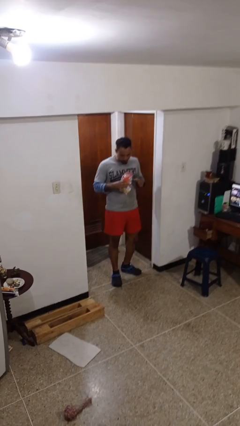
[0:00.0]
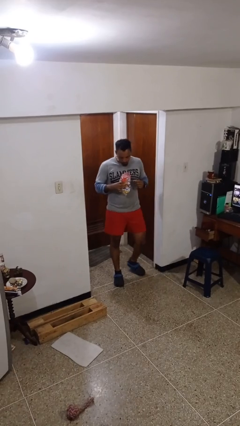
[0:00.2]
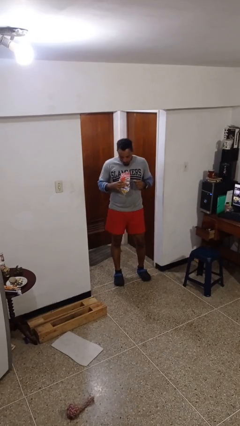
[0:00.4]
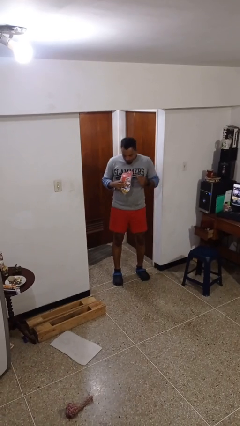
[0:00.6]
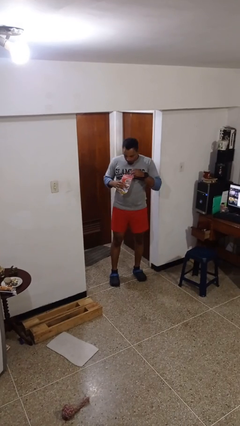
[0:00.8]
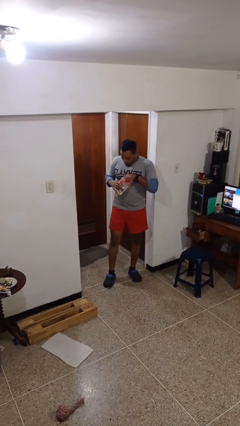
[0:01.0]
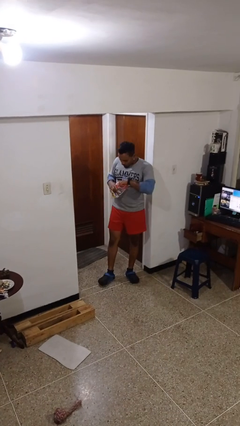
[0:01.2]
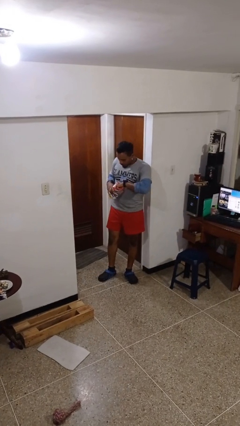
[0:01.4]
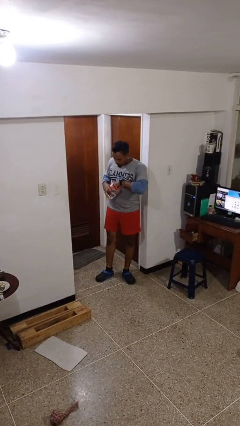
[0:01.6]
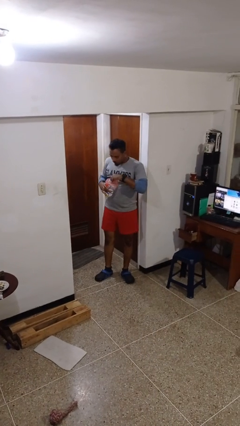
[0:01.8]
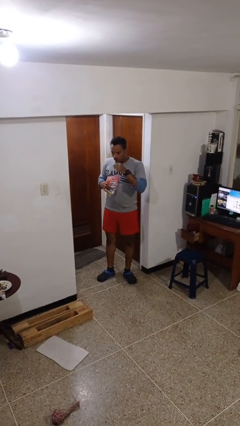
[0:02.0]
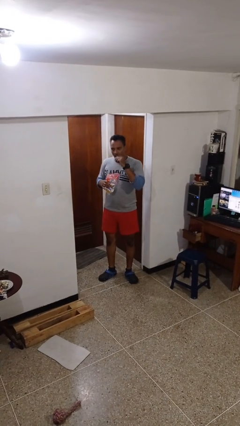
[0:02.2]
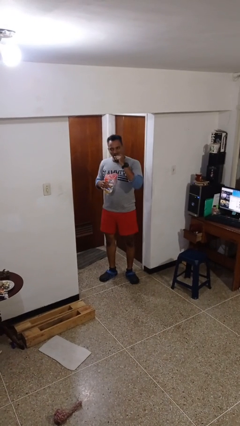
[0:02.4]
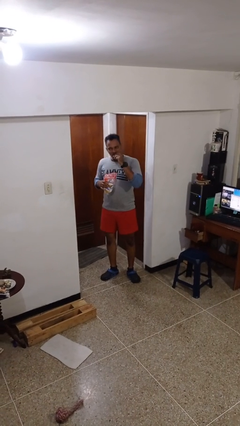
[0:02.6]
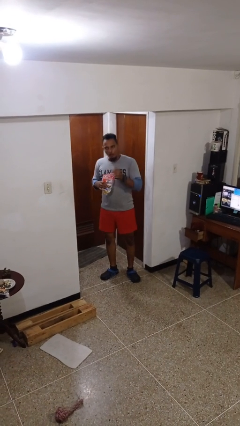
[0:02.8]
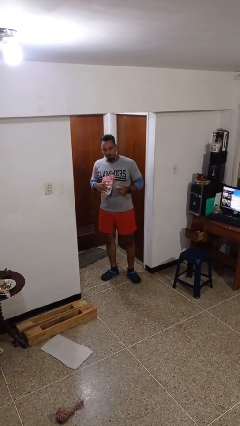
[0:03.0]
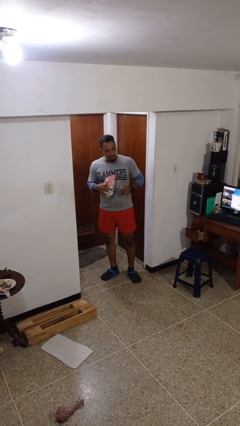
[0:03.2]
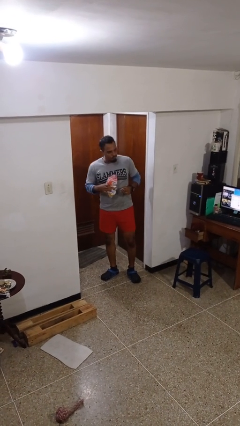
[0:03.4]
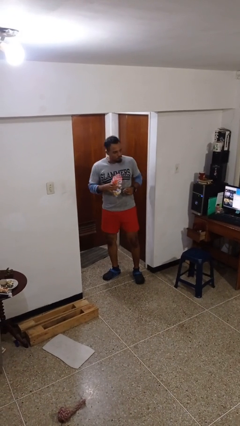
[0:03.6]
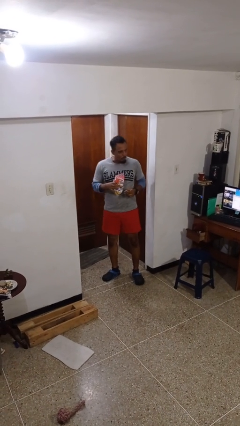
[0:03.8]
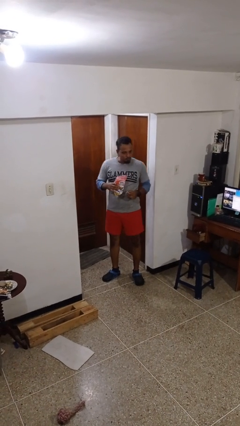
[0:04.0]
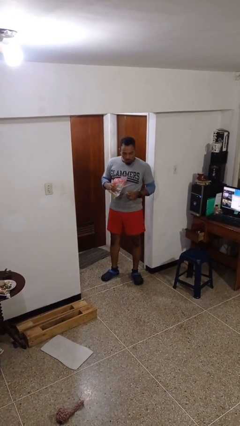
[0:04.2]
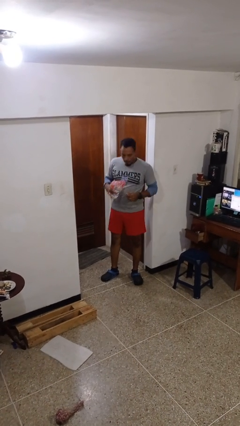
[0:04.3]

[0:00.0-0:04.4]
person eats snack from bag

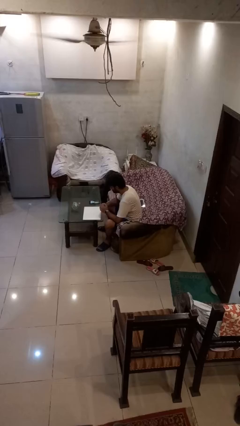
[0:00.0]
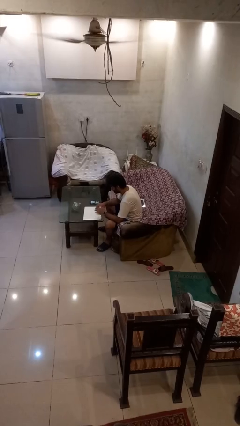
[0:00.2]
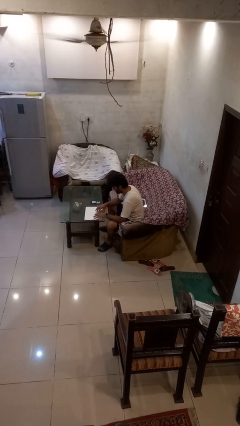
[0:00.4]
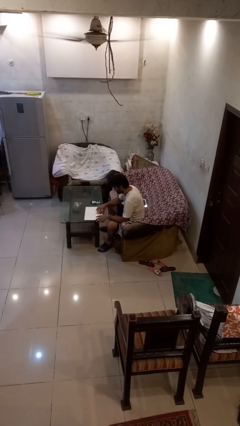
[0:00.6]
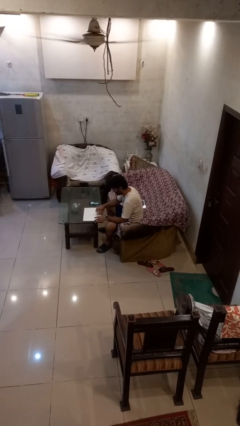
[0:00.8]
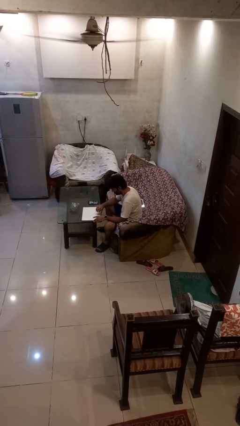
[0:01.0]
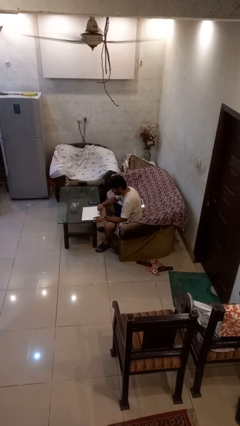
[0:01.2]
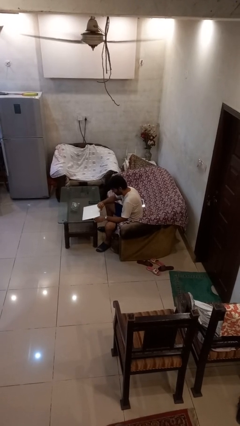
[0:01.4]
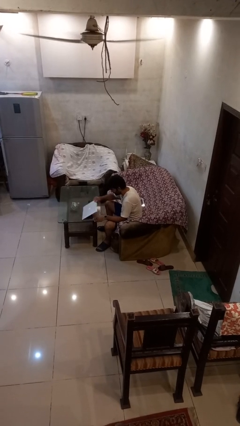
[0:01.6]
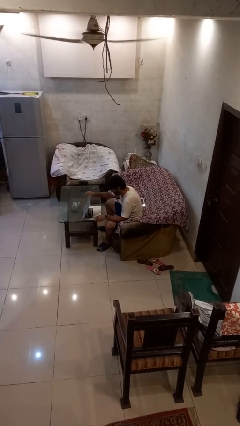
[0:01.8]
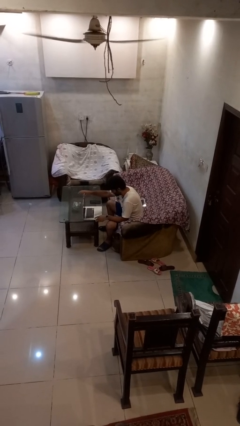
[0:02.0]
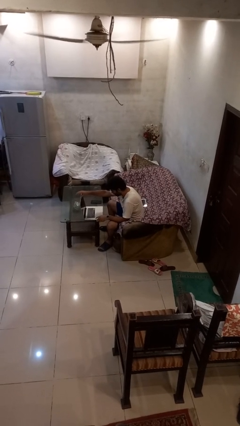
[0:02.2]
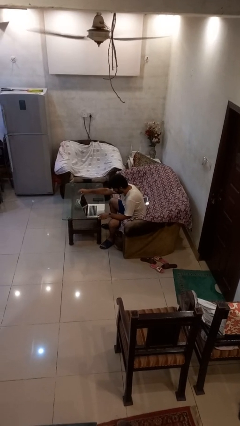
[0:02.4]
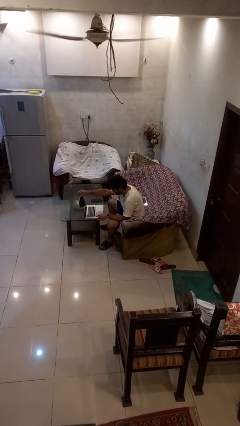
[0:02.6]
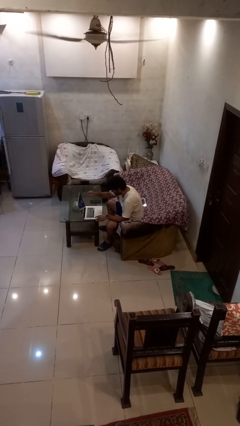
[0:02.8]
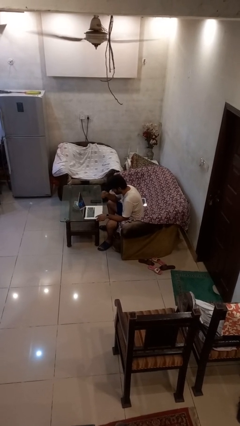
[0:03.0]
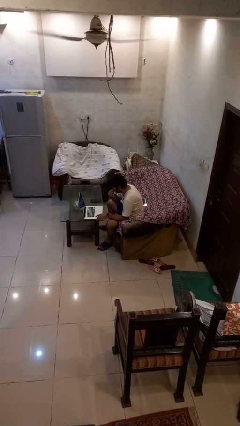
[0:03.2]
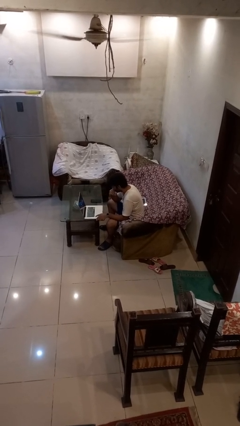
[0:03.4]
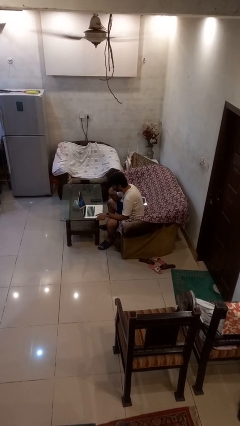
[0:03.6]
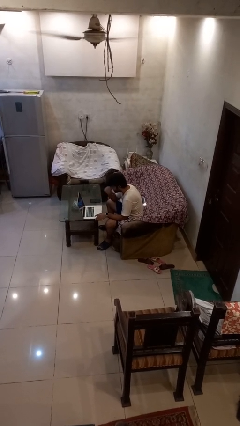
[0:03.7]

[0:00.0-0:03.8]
person opens laptop

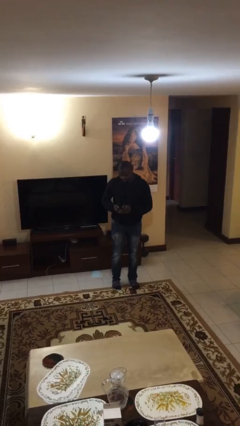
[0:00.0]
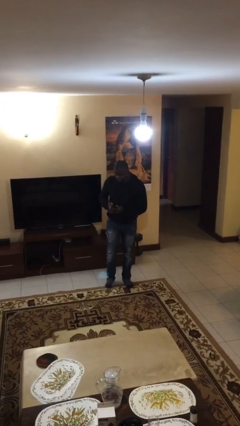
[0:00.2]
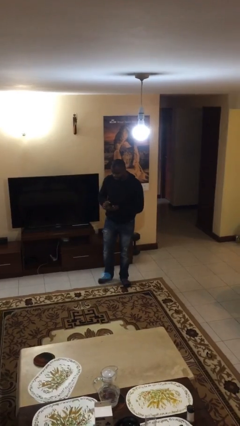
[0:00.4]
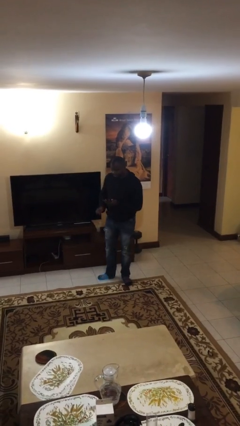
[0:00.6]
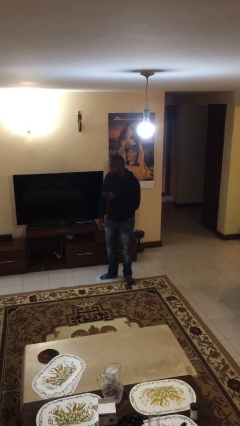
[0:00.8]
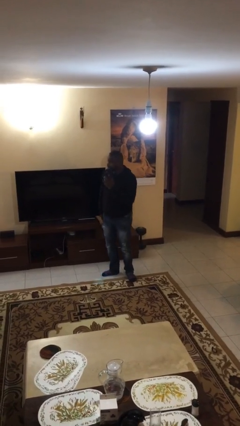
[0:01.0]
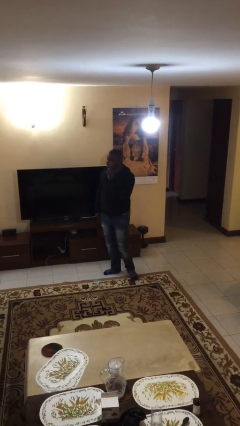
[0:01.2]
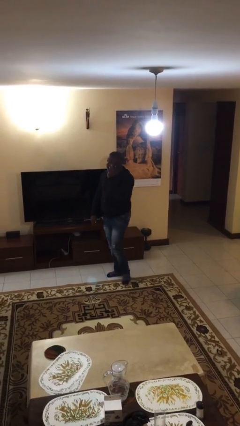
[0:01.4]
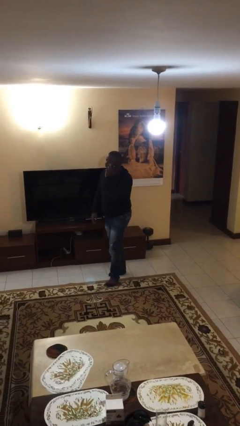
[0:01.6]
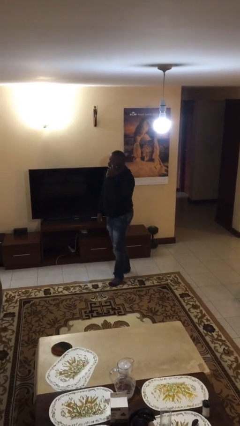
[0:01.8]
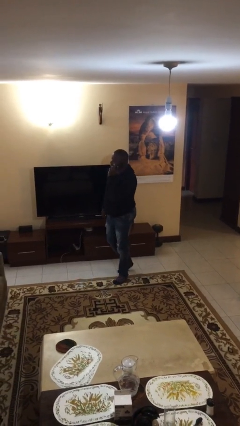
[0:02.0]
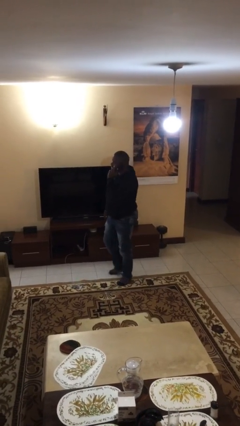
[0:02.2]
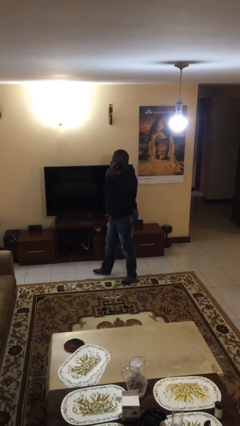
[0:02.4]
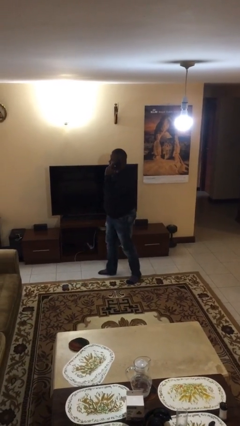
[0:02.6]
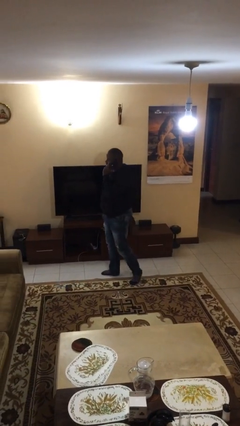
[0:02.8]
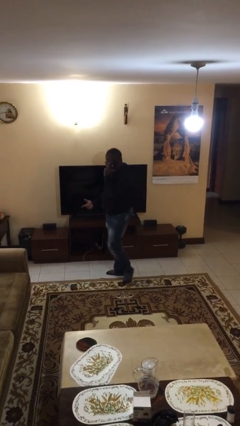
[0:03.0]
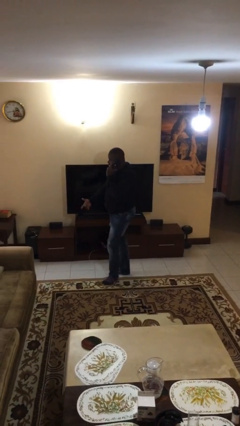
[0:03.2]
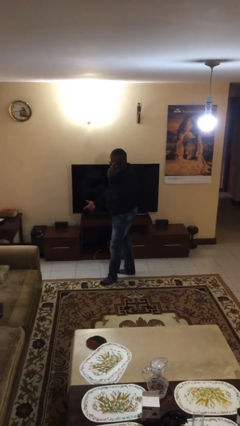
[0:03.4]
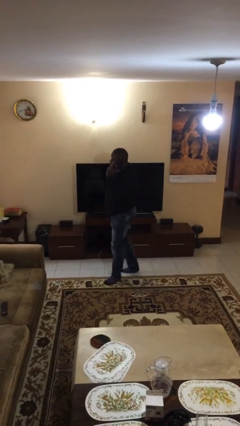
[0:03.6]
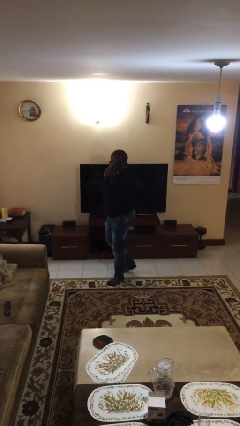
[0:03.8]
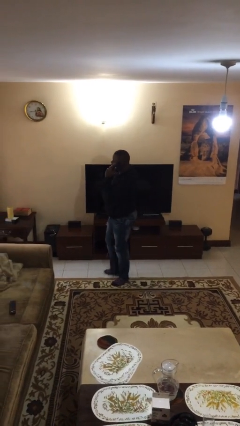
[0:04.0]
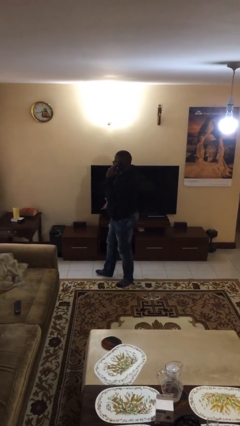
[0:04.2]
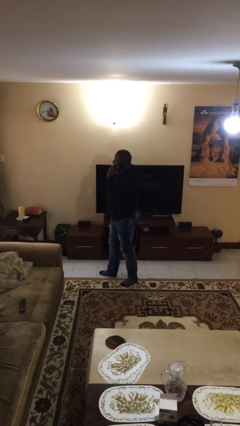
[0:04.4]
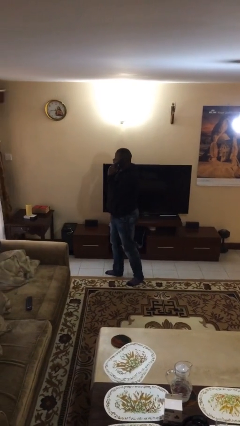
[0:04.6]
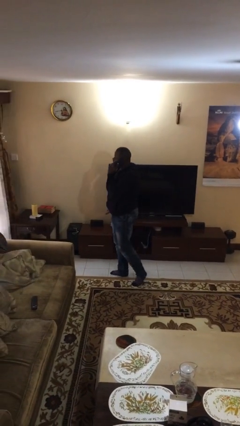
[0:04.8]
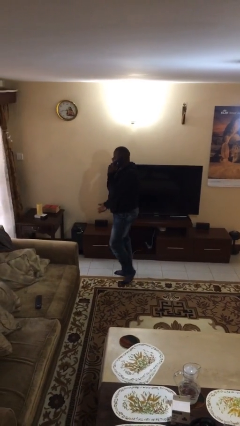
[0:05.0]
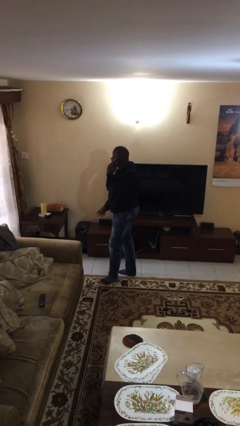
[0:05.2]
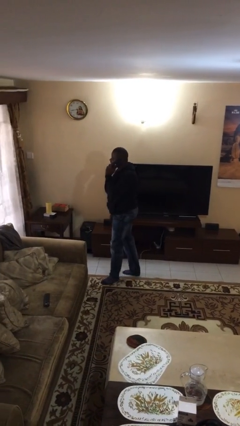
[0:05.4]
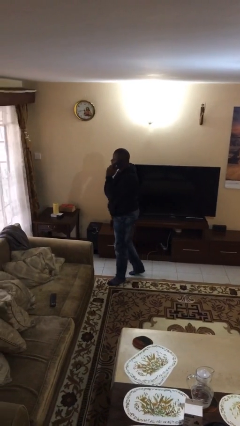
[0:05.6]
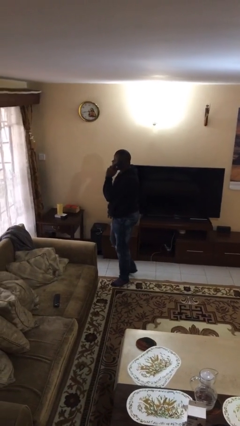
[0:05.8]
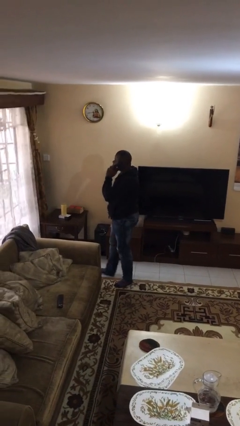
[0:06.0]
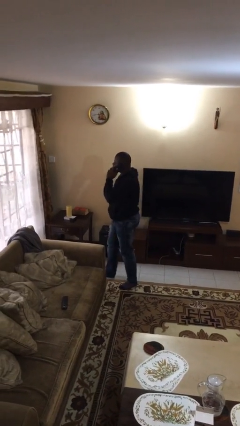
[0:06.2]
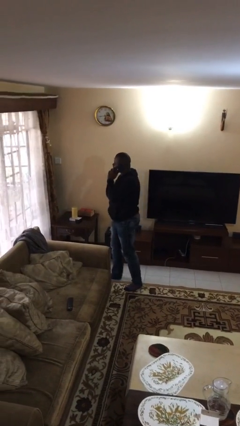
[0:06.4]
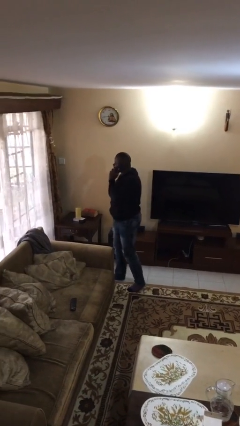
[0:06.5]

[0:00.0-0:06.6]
person talks on phone

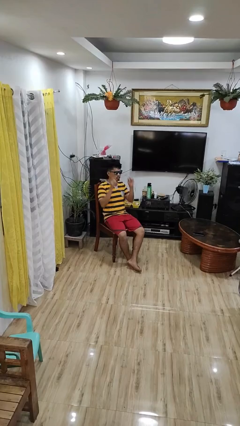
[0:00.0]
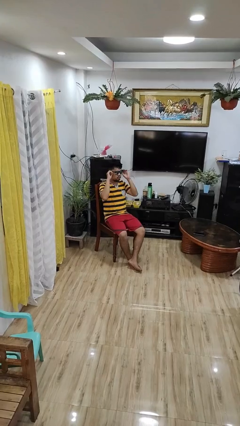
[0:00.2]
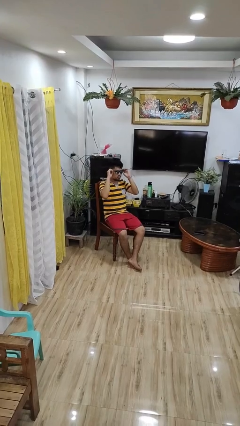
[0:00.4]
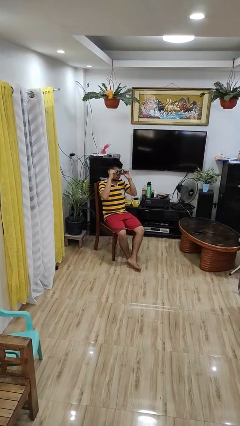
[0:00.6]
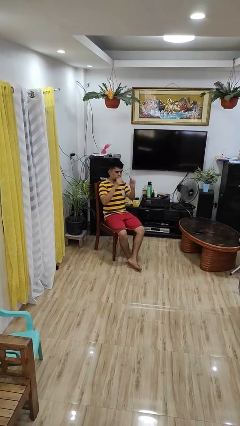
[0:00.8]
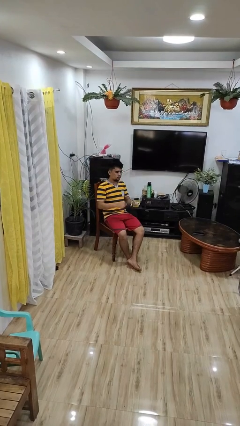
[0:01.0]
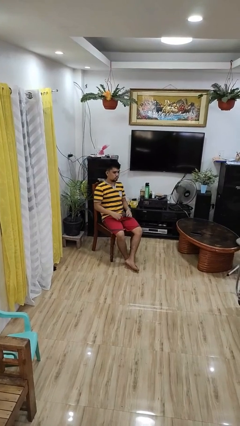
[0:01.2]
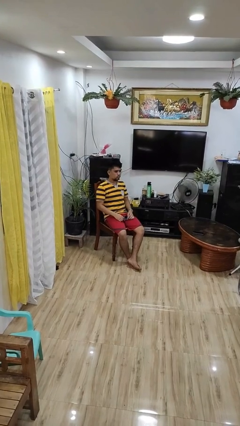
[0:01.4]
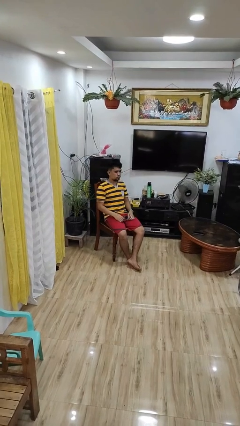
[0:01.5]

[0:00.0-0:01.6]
person takes off sunglasses

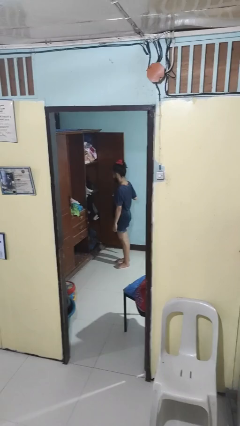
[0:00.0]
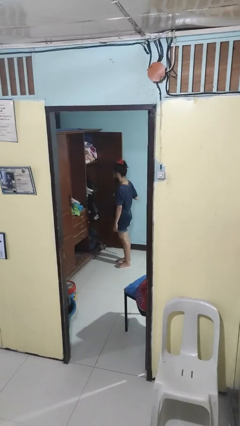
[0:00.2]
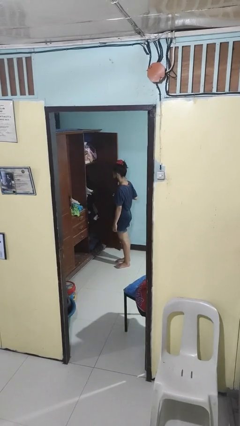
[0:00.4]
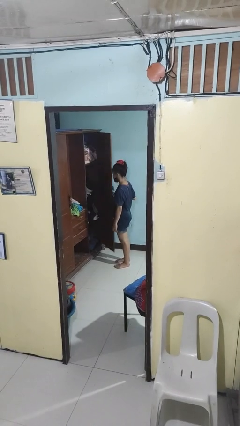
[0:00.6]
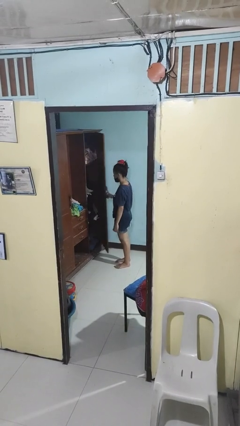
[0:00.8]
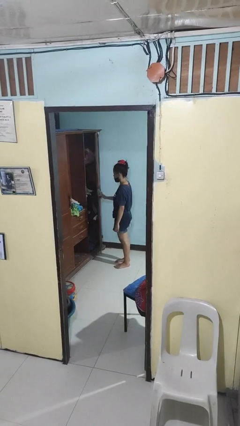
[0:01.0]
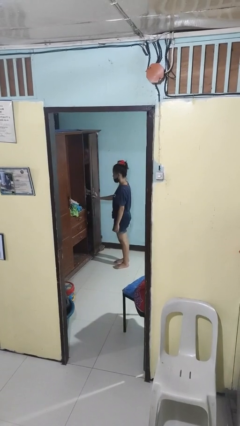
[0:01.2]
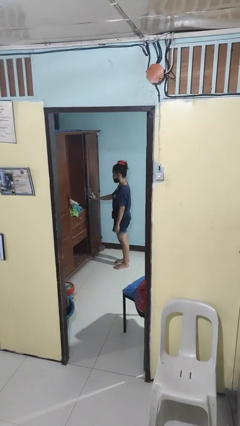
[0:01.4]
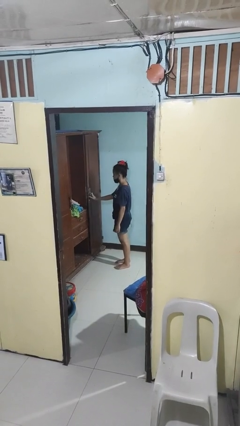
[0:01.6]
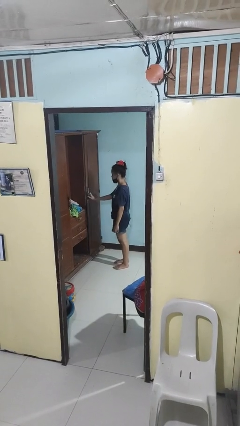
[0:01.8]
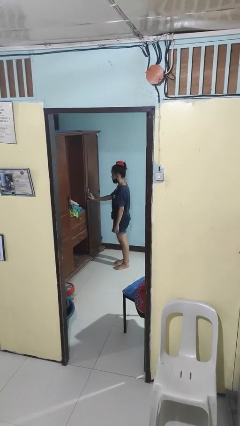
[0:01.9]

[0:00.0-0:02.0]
person closes closet door
